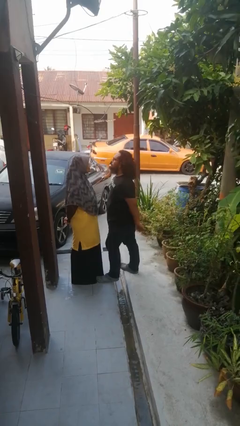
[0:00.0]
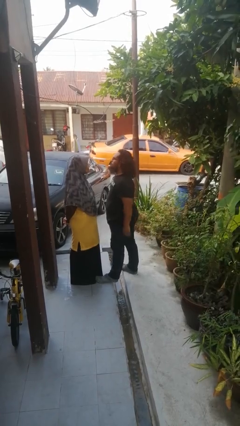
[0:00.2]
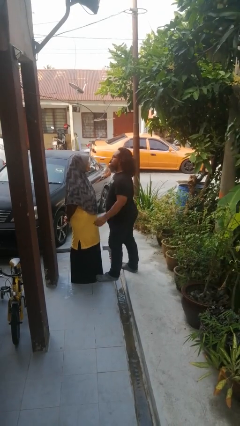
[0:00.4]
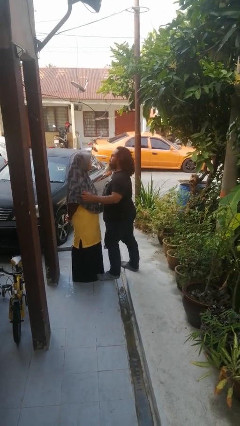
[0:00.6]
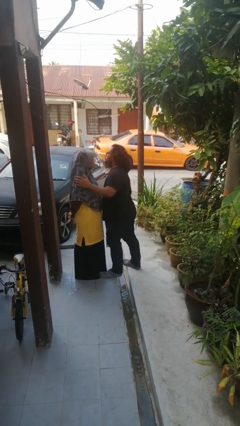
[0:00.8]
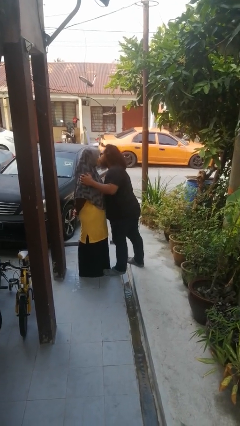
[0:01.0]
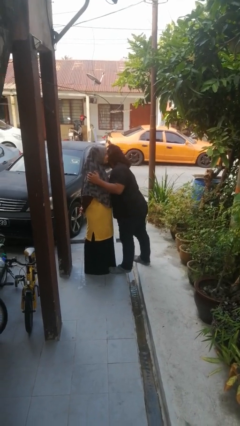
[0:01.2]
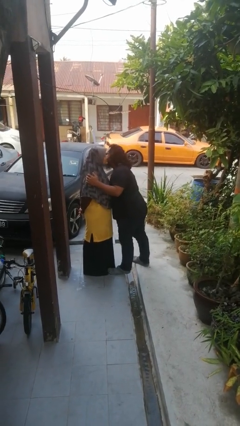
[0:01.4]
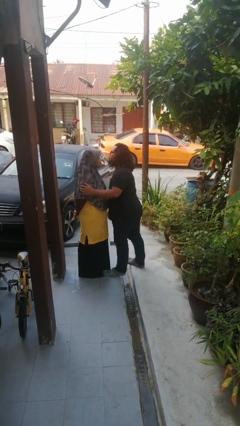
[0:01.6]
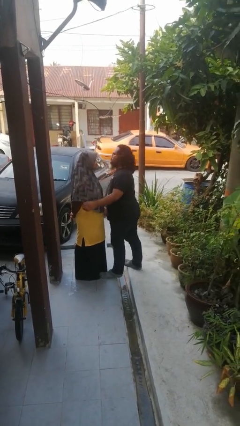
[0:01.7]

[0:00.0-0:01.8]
person kisses cheek of person

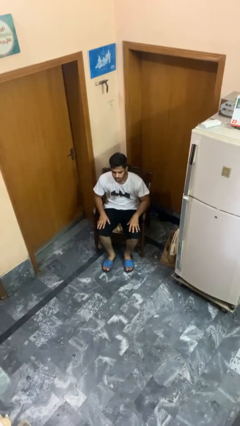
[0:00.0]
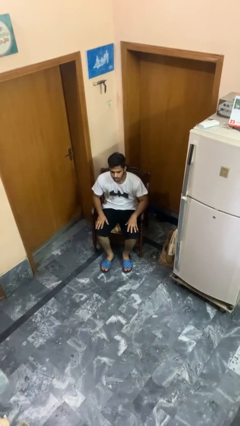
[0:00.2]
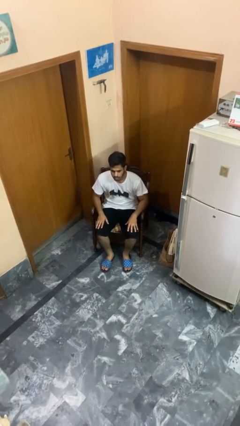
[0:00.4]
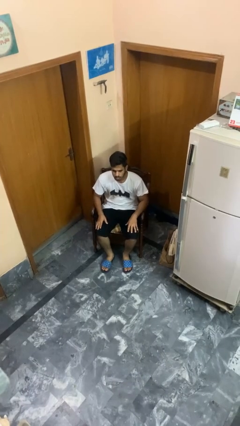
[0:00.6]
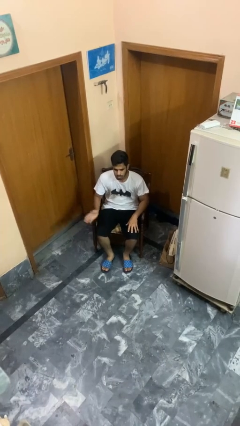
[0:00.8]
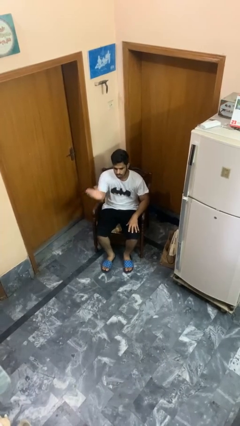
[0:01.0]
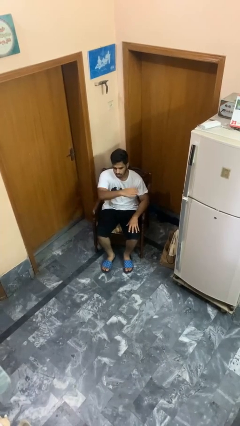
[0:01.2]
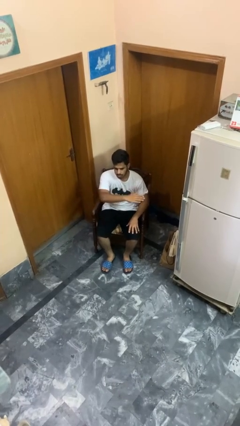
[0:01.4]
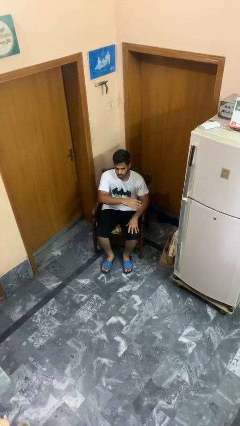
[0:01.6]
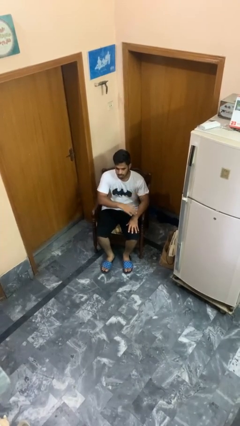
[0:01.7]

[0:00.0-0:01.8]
person gestures swipe left

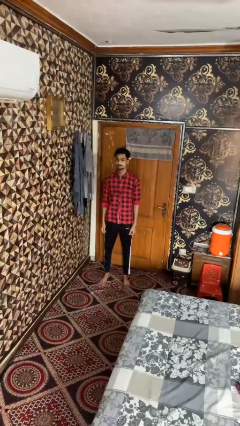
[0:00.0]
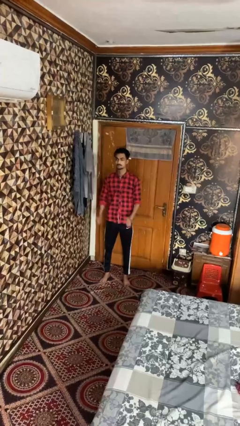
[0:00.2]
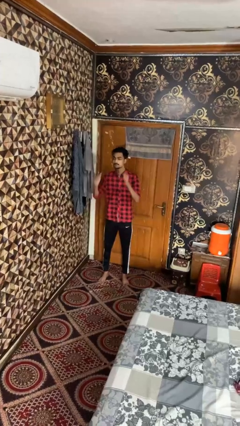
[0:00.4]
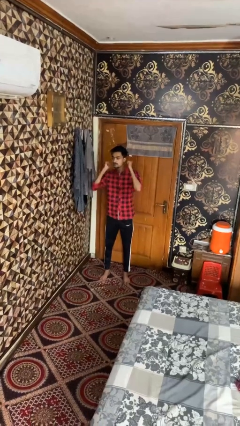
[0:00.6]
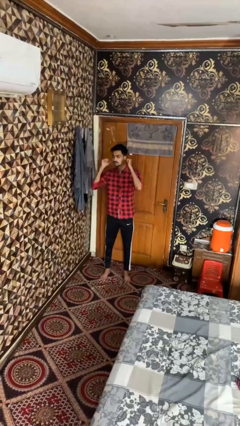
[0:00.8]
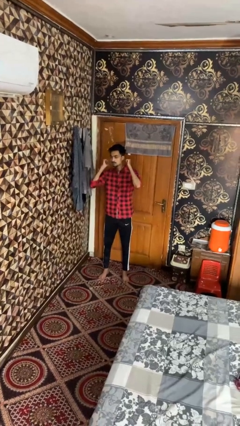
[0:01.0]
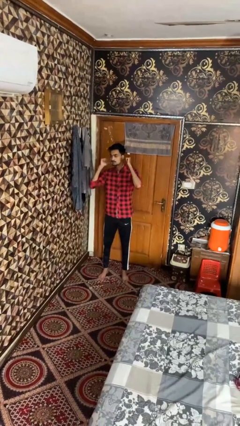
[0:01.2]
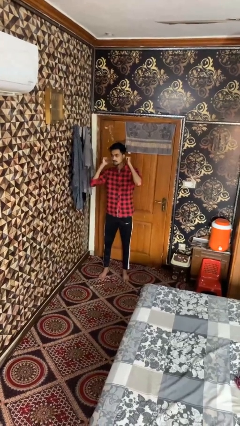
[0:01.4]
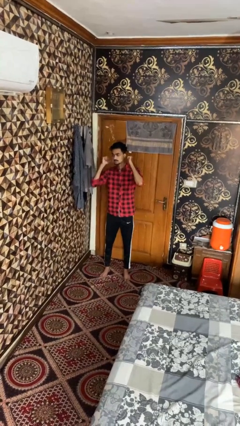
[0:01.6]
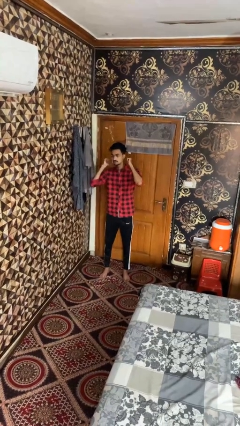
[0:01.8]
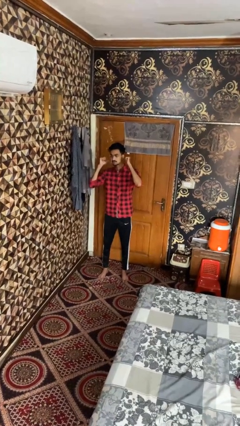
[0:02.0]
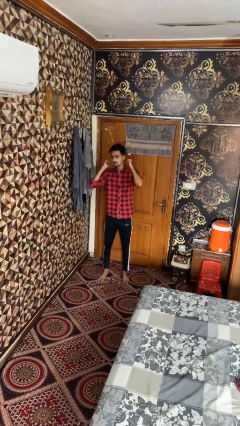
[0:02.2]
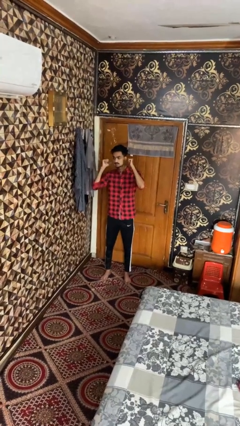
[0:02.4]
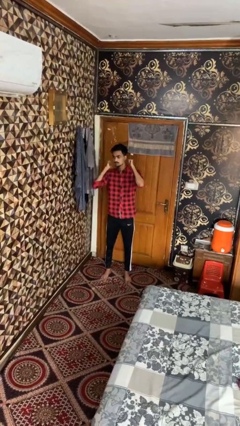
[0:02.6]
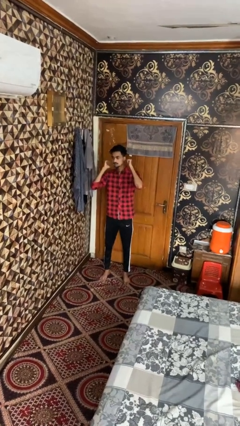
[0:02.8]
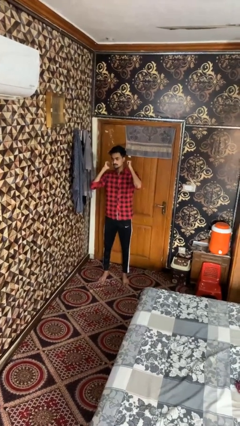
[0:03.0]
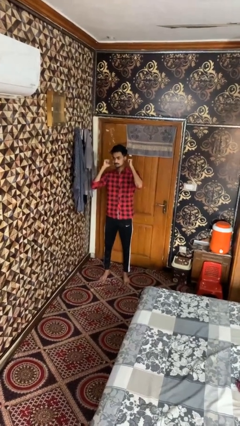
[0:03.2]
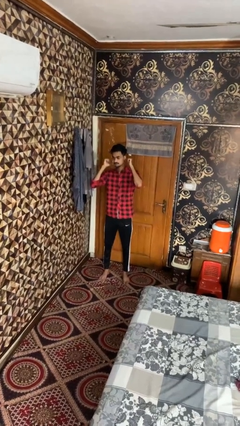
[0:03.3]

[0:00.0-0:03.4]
person gestures behind me

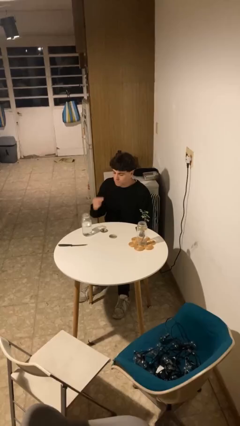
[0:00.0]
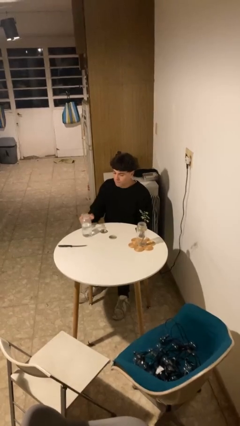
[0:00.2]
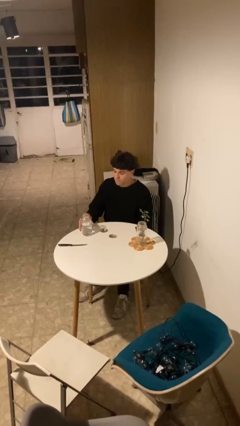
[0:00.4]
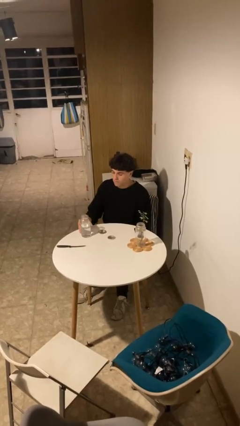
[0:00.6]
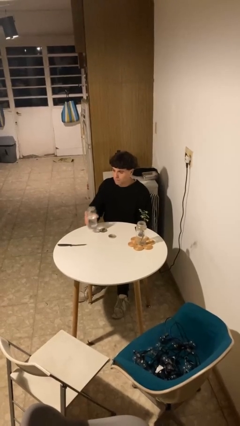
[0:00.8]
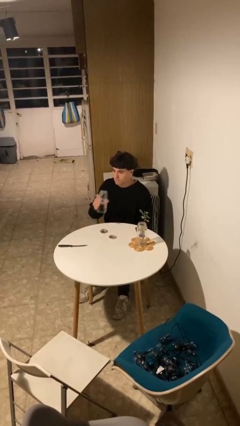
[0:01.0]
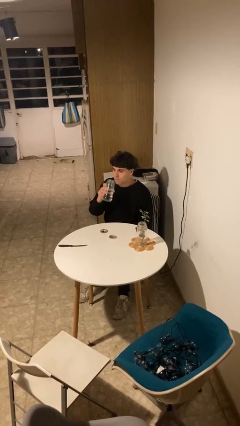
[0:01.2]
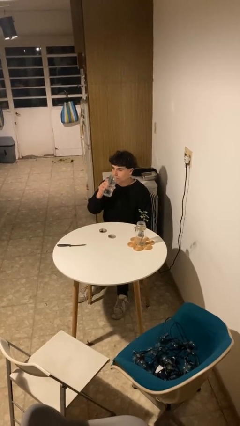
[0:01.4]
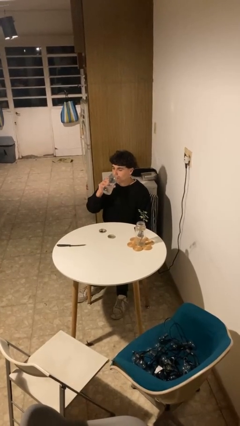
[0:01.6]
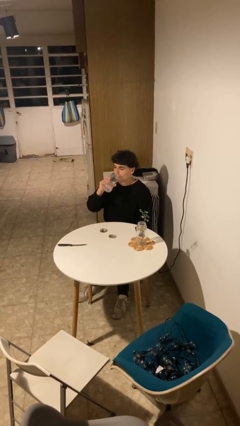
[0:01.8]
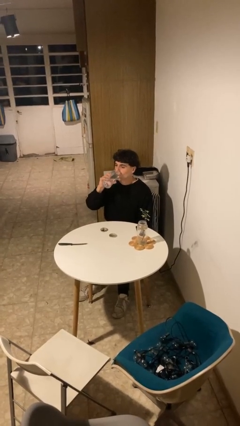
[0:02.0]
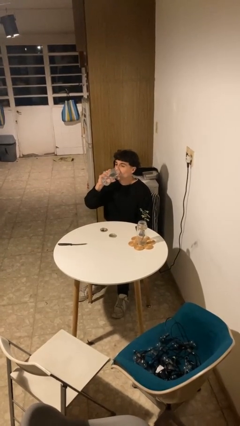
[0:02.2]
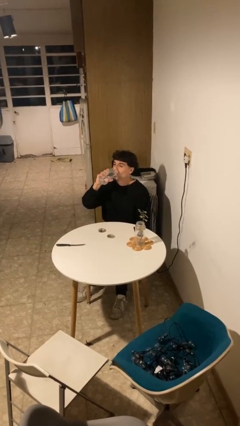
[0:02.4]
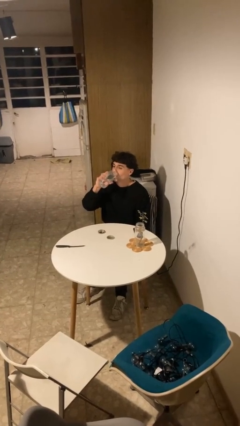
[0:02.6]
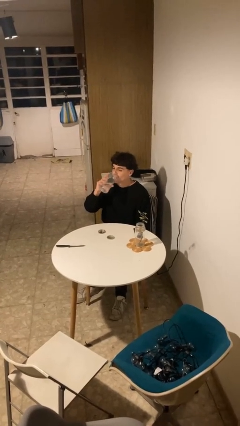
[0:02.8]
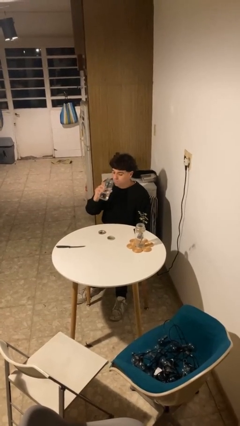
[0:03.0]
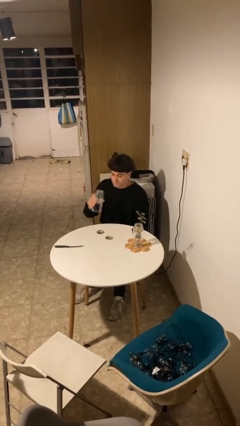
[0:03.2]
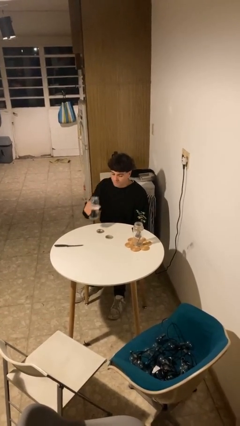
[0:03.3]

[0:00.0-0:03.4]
person drinks from cup

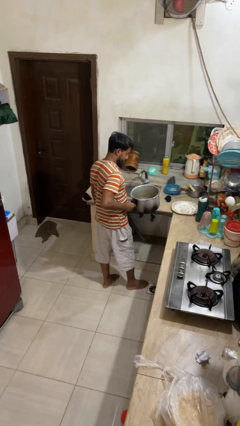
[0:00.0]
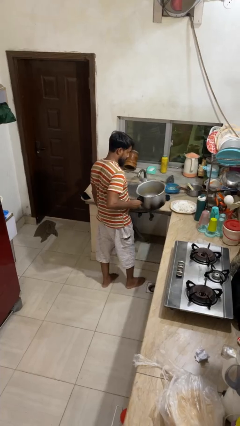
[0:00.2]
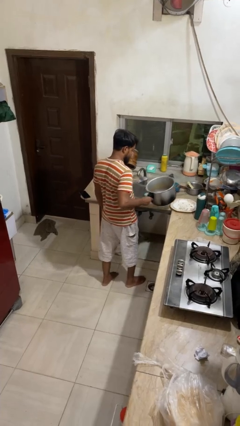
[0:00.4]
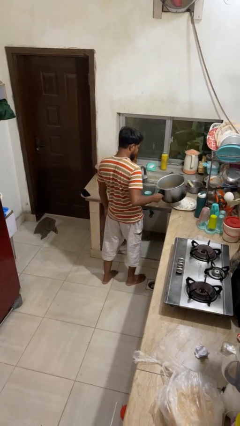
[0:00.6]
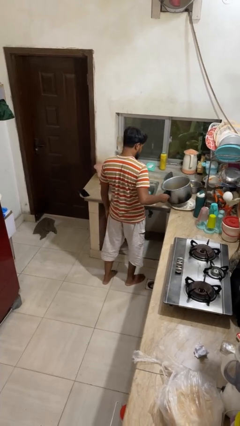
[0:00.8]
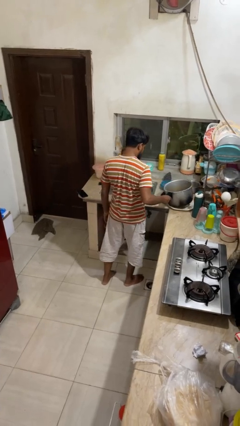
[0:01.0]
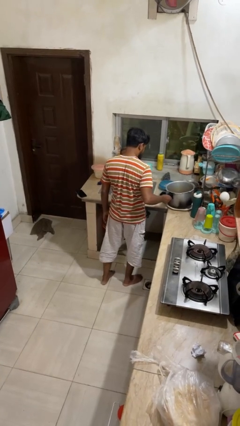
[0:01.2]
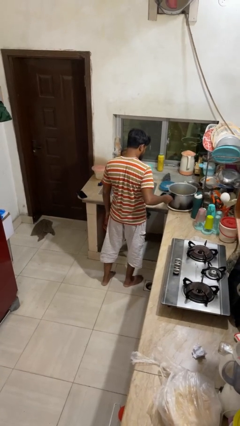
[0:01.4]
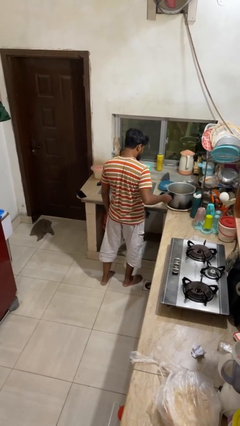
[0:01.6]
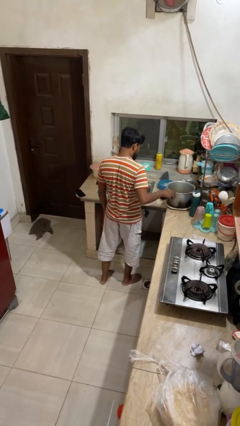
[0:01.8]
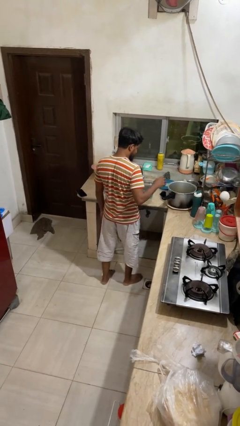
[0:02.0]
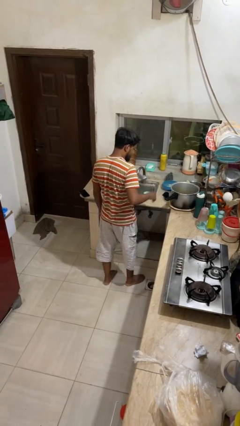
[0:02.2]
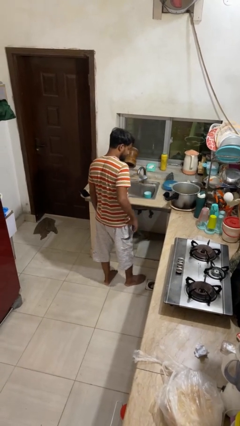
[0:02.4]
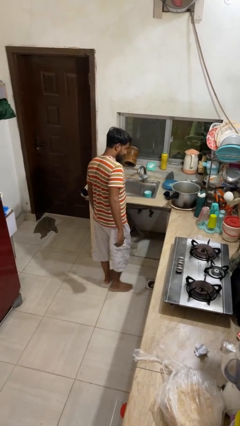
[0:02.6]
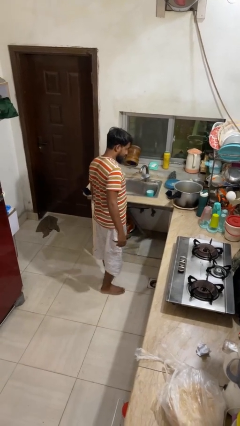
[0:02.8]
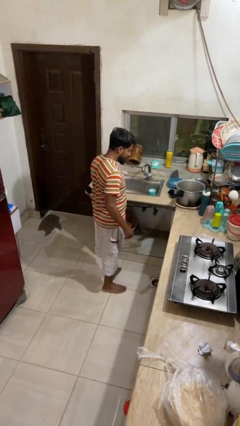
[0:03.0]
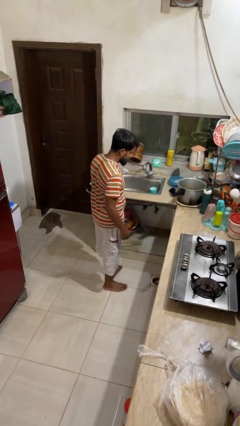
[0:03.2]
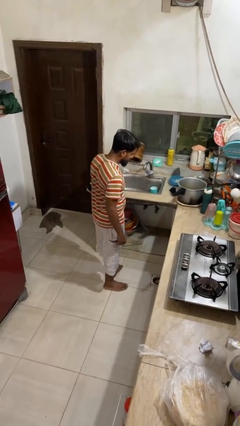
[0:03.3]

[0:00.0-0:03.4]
person puts down object on countertop

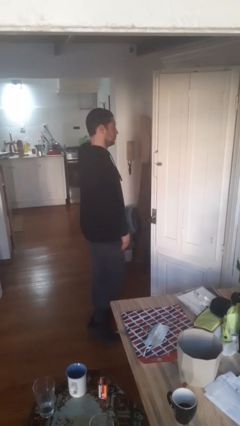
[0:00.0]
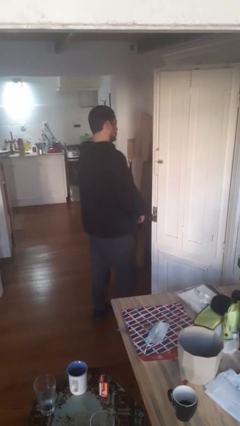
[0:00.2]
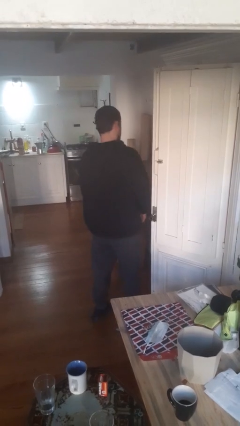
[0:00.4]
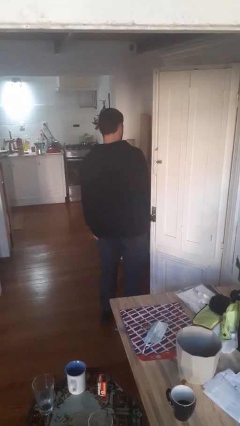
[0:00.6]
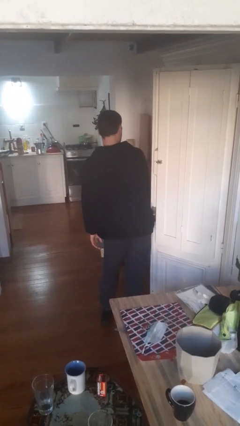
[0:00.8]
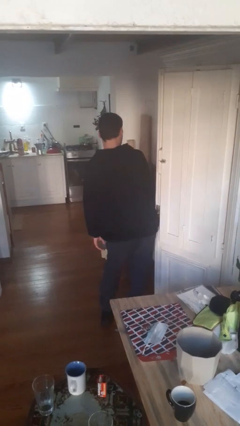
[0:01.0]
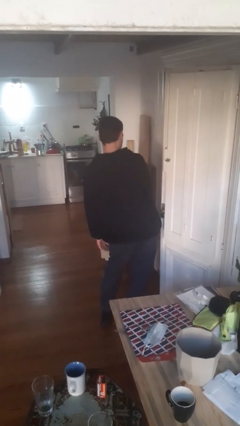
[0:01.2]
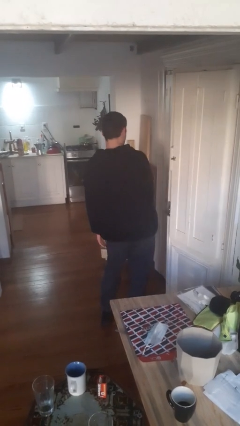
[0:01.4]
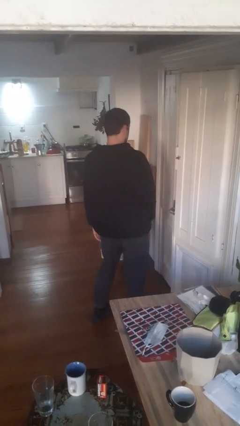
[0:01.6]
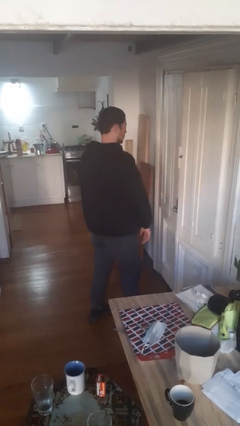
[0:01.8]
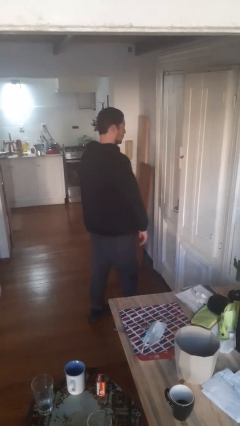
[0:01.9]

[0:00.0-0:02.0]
person closes door with hip

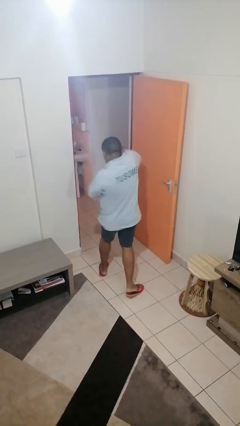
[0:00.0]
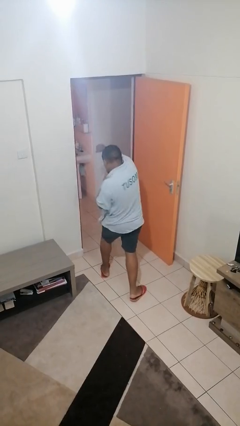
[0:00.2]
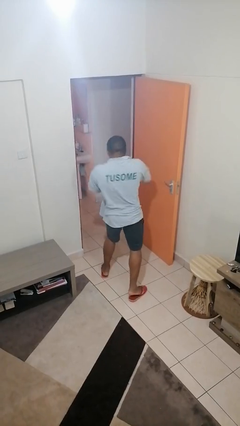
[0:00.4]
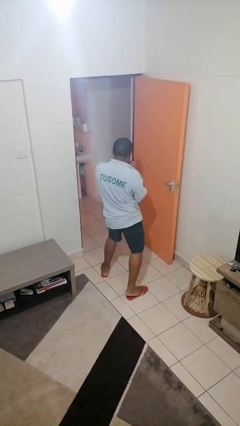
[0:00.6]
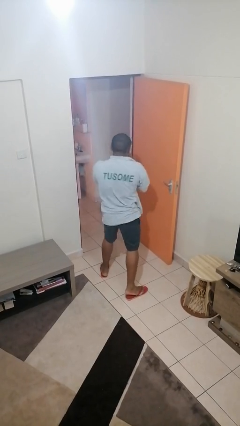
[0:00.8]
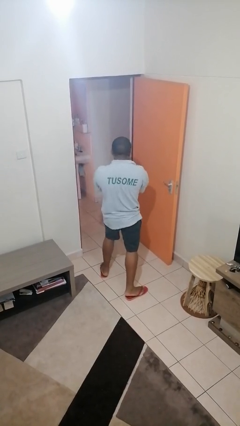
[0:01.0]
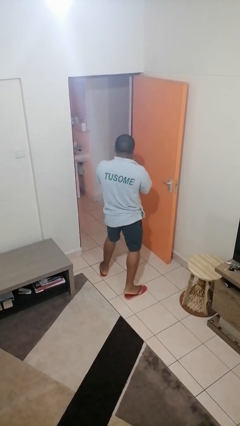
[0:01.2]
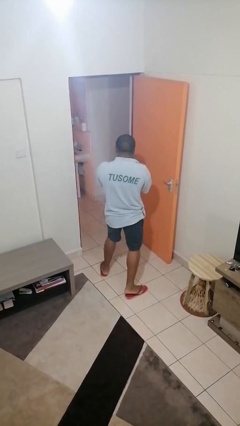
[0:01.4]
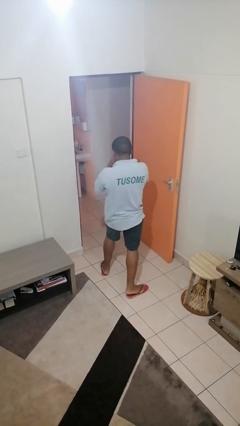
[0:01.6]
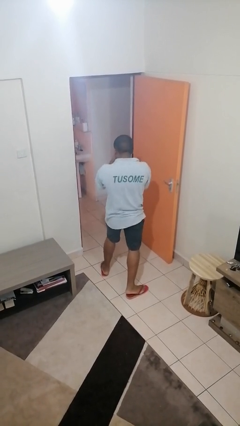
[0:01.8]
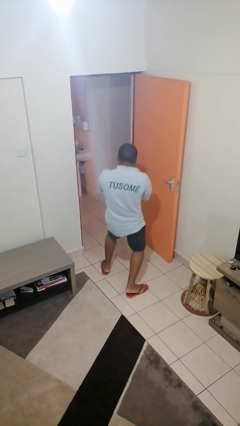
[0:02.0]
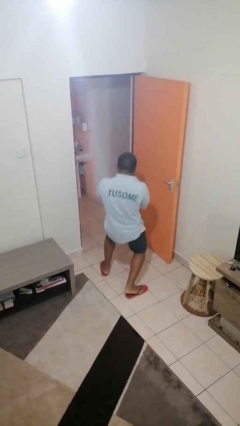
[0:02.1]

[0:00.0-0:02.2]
person punches
